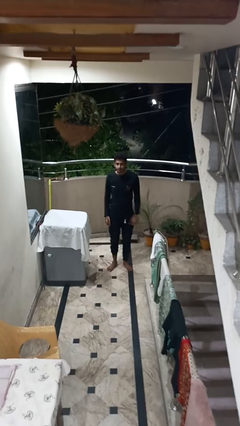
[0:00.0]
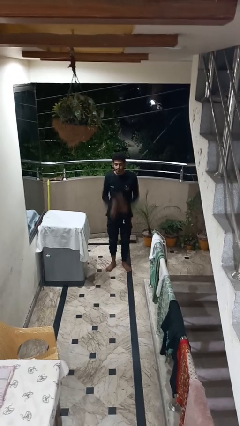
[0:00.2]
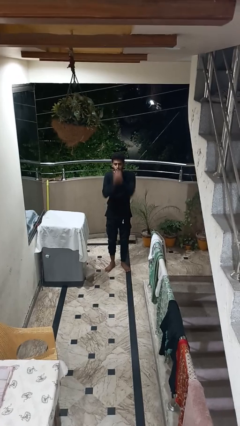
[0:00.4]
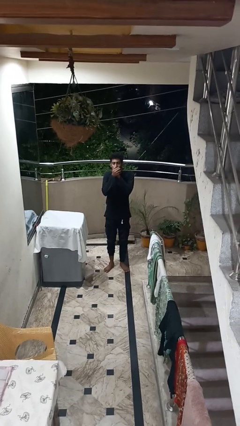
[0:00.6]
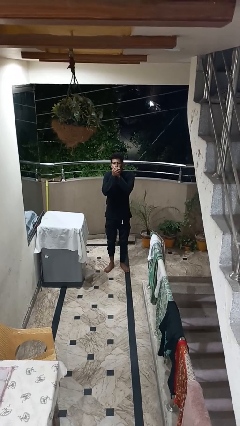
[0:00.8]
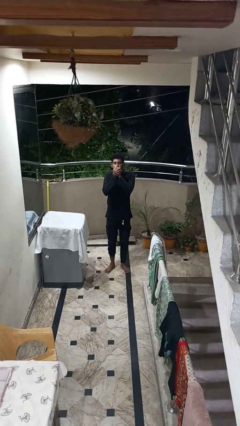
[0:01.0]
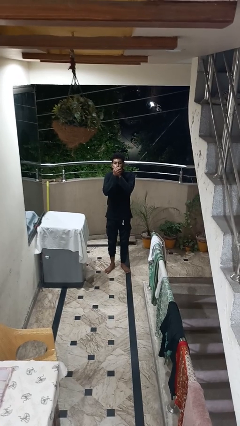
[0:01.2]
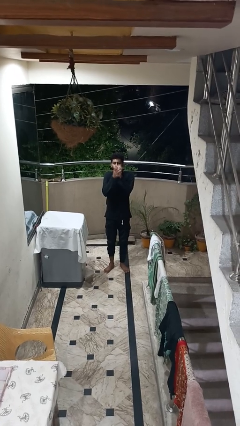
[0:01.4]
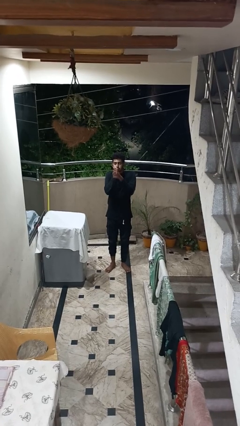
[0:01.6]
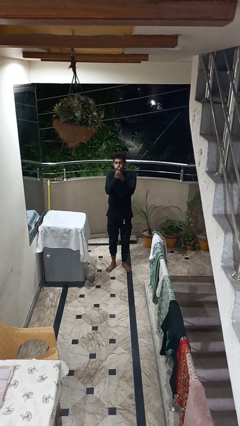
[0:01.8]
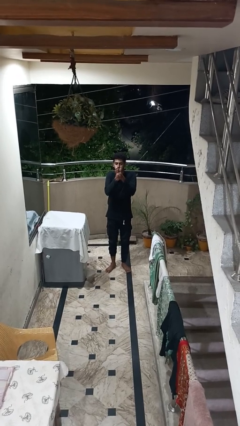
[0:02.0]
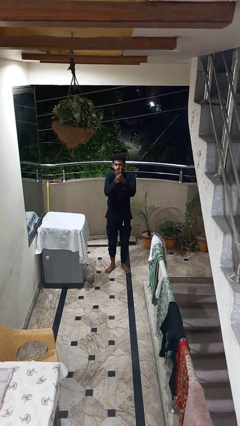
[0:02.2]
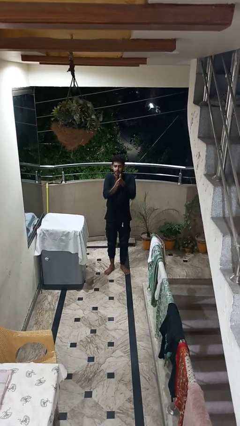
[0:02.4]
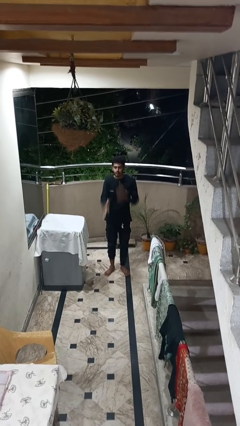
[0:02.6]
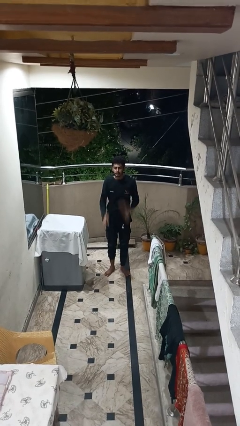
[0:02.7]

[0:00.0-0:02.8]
person blows into hands

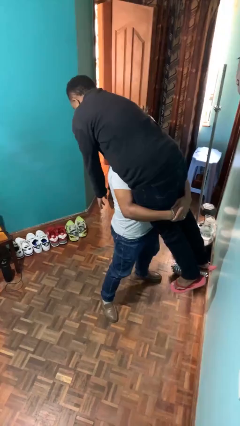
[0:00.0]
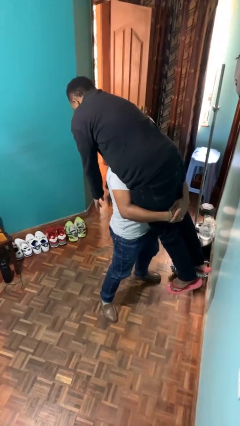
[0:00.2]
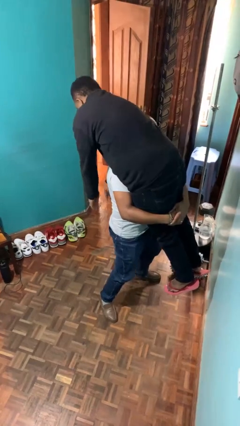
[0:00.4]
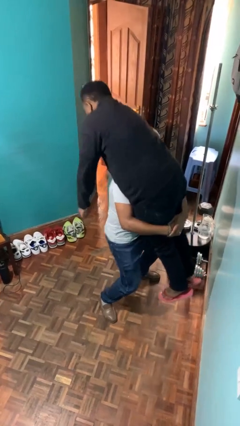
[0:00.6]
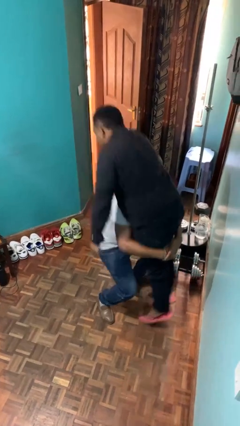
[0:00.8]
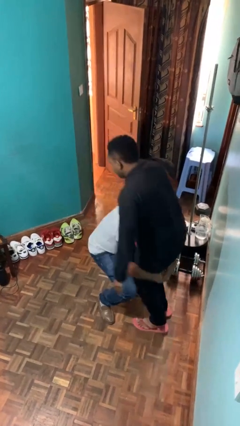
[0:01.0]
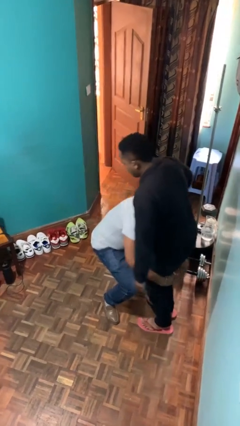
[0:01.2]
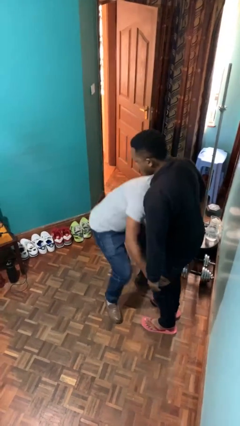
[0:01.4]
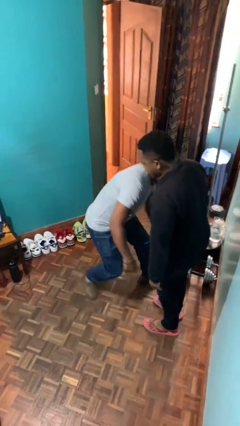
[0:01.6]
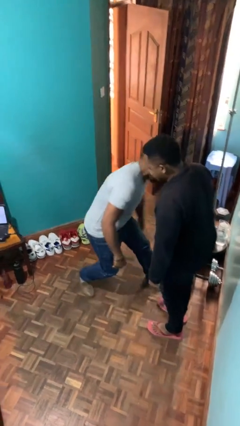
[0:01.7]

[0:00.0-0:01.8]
person puts down person

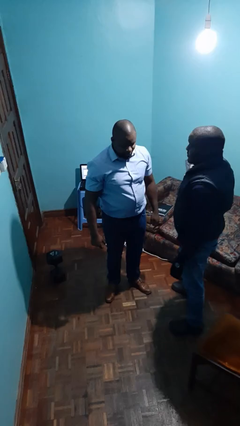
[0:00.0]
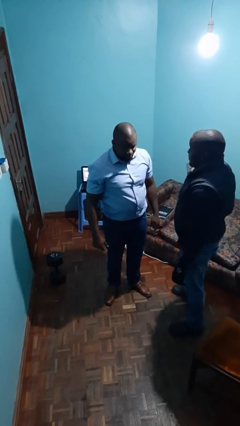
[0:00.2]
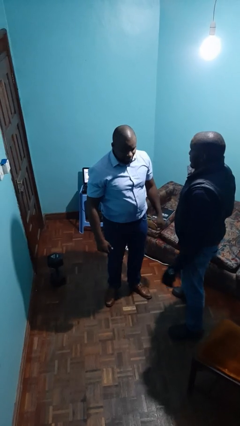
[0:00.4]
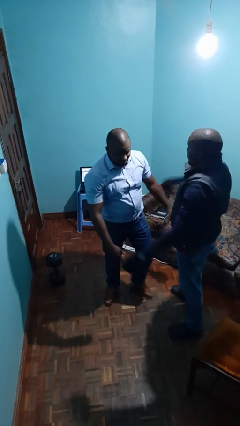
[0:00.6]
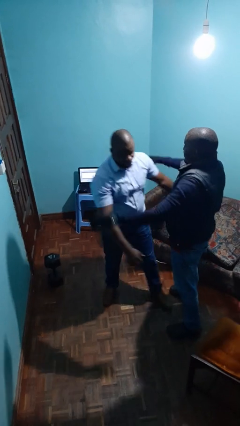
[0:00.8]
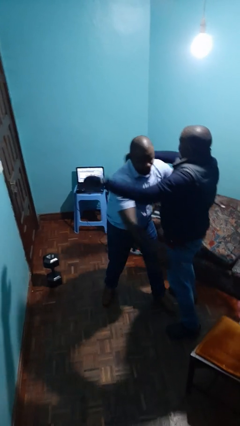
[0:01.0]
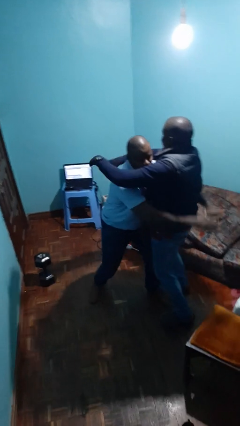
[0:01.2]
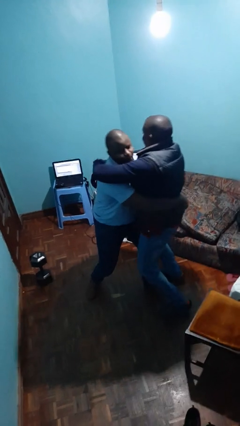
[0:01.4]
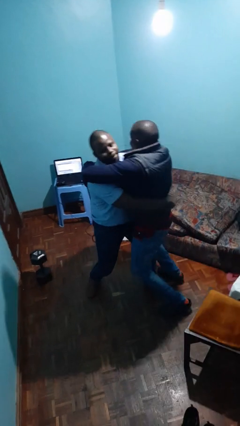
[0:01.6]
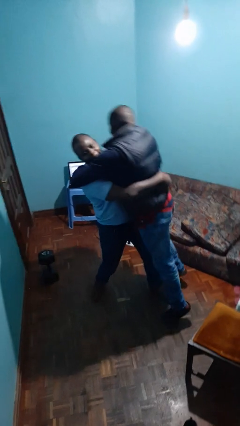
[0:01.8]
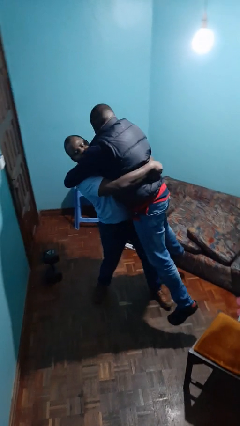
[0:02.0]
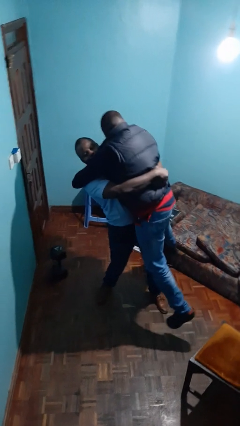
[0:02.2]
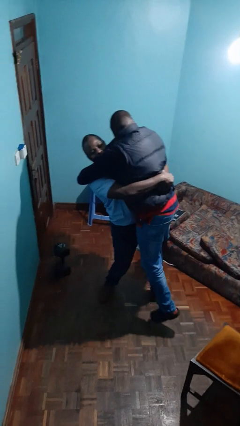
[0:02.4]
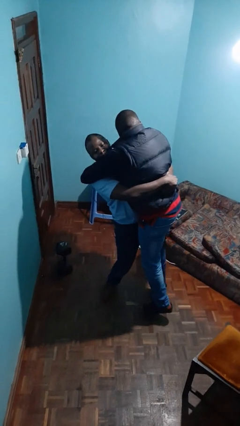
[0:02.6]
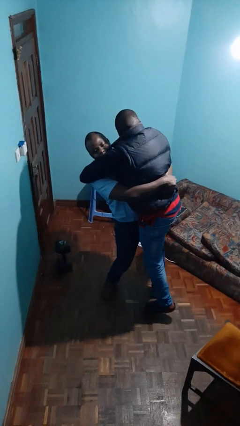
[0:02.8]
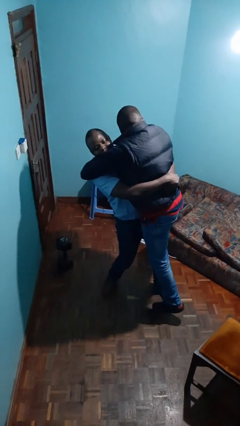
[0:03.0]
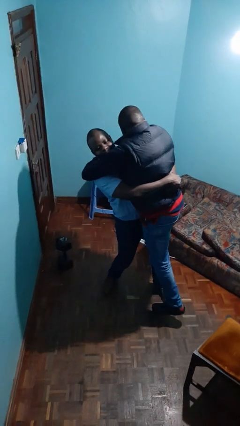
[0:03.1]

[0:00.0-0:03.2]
person picks up person

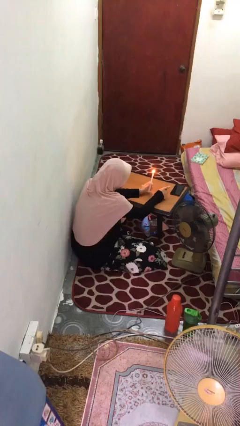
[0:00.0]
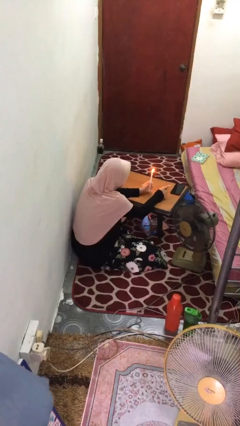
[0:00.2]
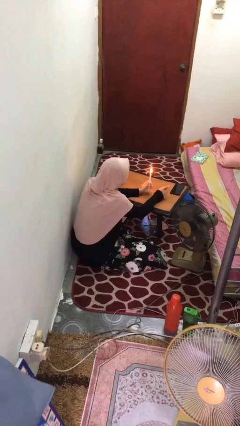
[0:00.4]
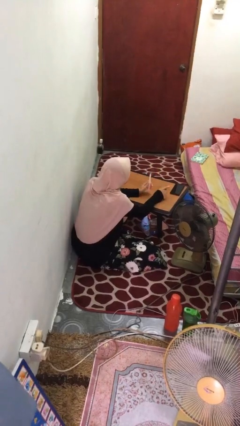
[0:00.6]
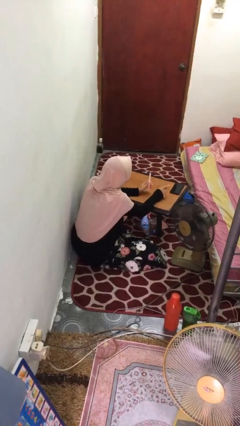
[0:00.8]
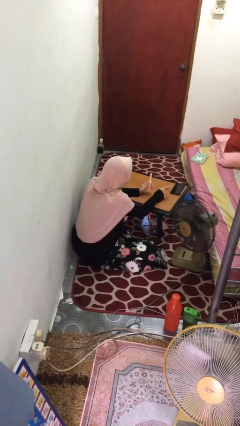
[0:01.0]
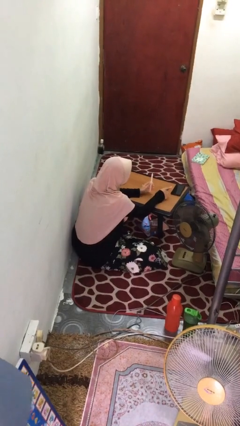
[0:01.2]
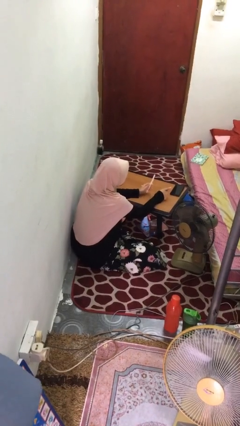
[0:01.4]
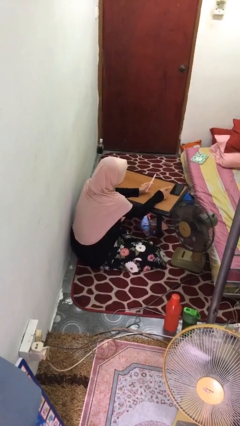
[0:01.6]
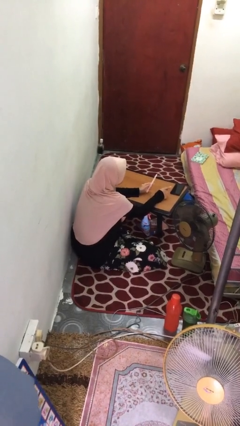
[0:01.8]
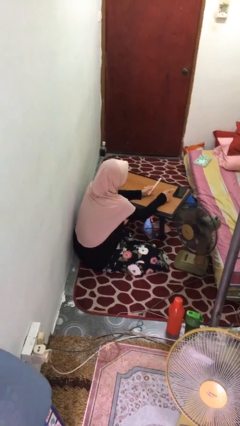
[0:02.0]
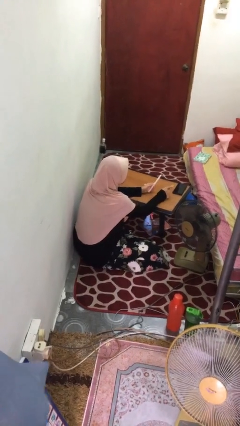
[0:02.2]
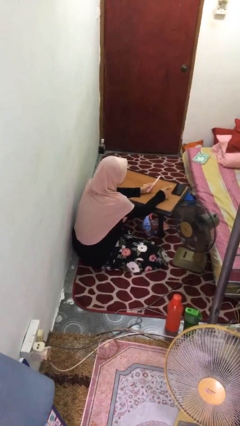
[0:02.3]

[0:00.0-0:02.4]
person extinguishes candle

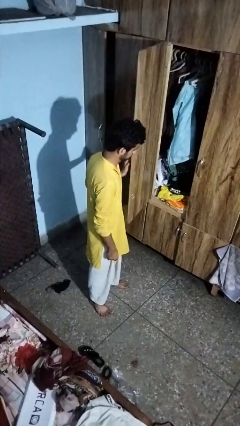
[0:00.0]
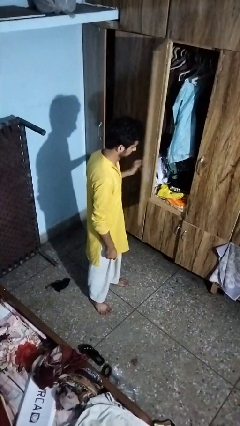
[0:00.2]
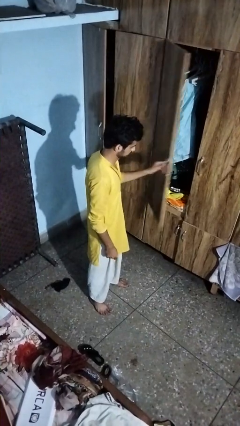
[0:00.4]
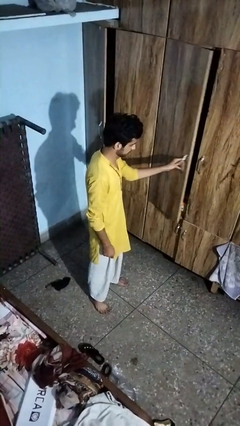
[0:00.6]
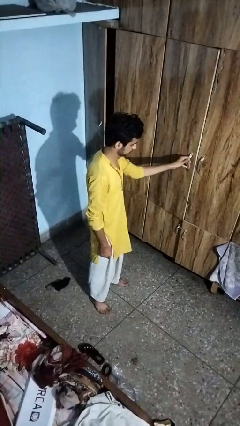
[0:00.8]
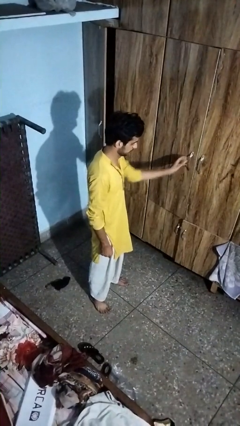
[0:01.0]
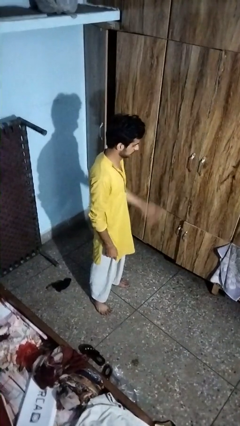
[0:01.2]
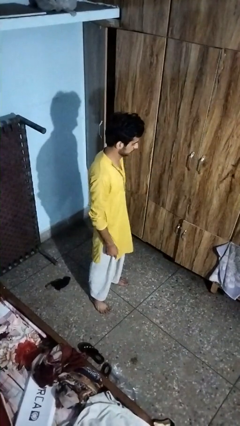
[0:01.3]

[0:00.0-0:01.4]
person closes closet door

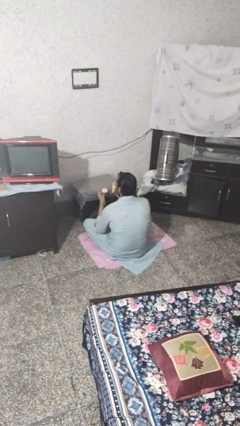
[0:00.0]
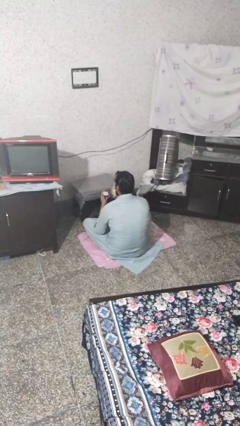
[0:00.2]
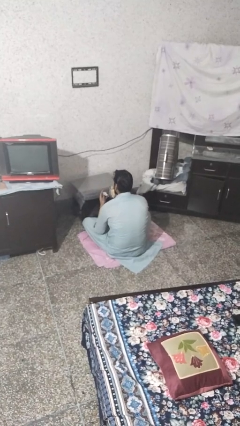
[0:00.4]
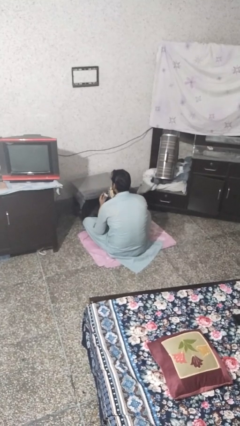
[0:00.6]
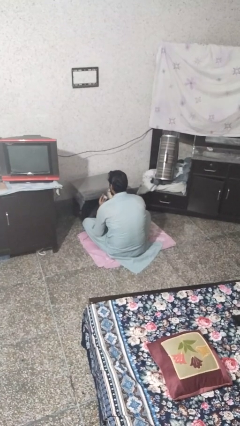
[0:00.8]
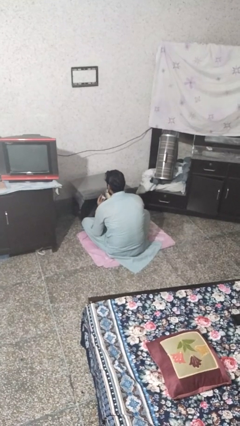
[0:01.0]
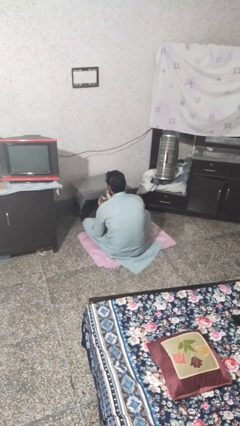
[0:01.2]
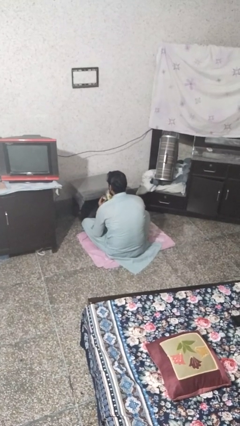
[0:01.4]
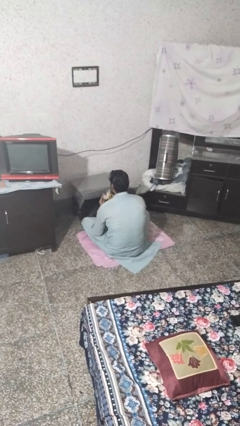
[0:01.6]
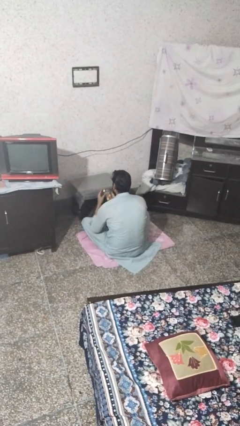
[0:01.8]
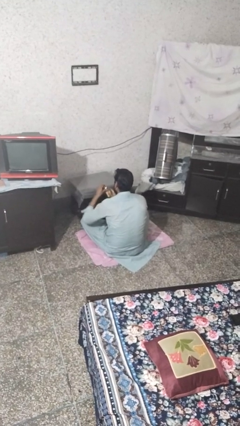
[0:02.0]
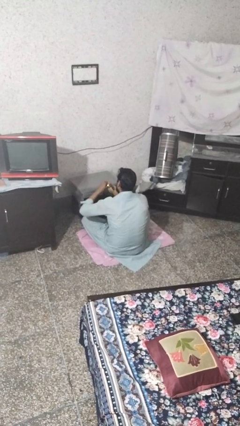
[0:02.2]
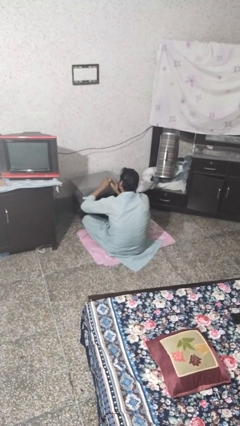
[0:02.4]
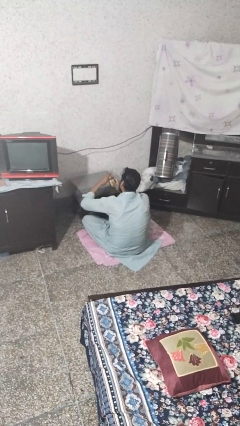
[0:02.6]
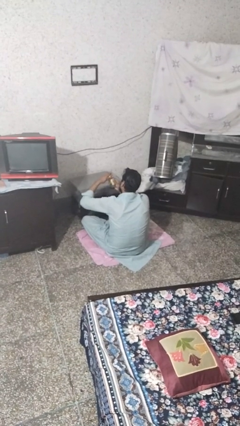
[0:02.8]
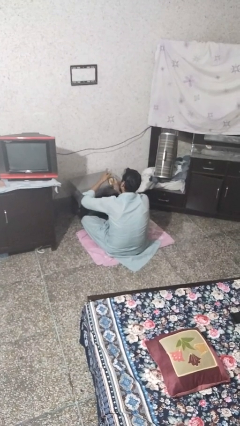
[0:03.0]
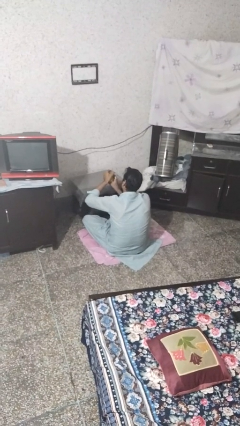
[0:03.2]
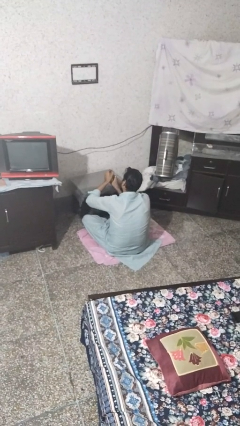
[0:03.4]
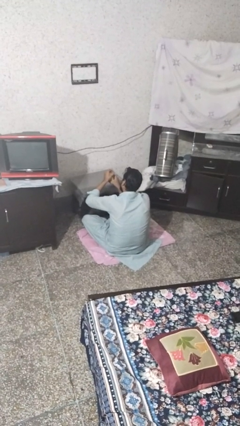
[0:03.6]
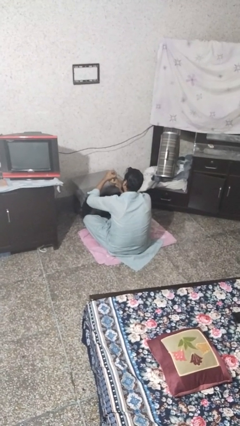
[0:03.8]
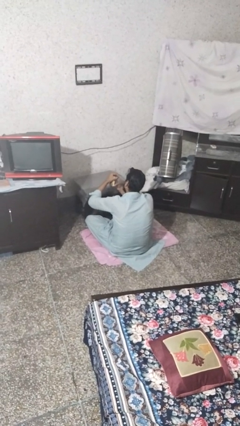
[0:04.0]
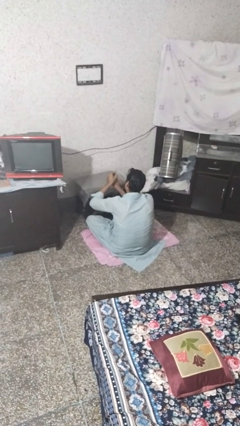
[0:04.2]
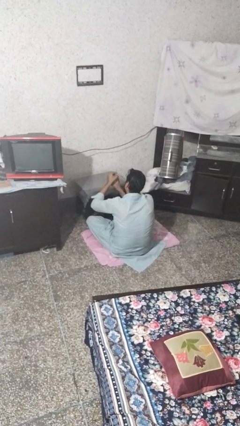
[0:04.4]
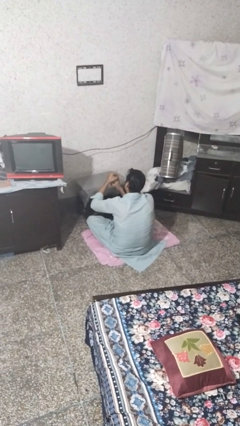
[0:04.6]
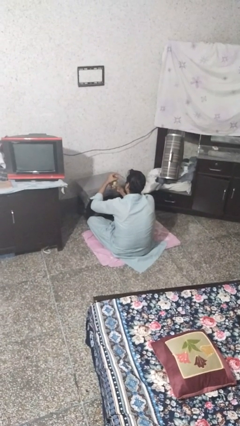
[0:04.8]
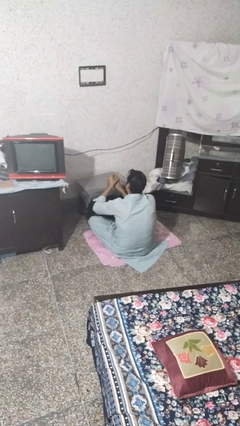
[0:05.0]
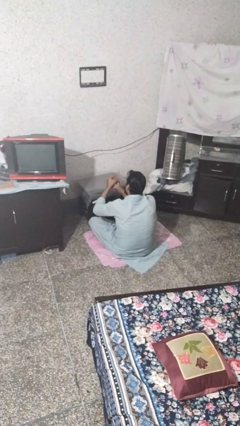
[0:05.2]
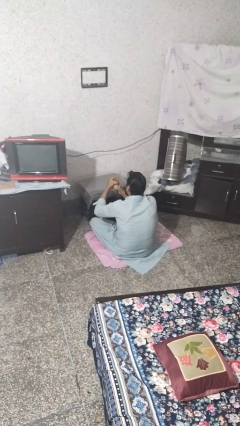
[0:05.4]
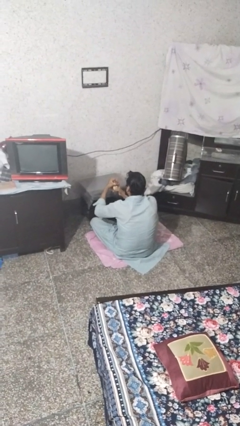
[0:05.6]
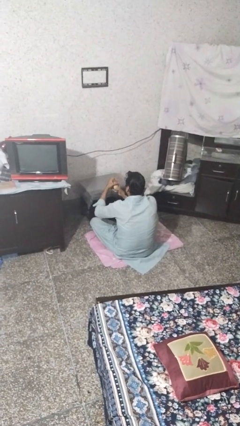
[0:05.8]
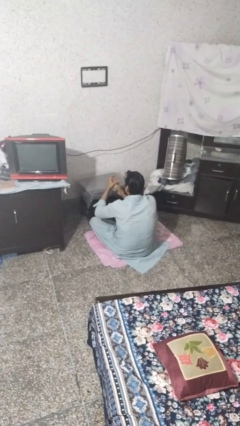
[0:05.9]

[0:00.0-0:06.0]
person closes jar
